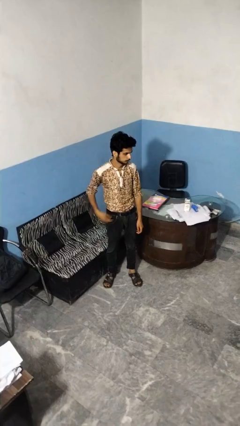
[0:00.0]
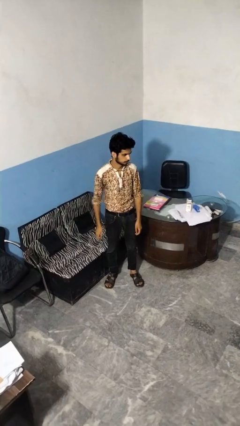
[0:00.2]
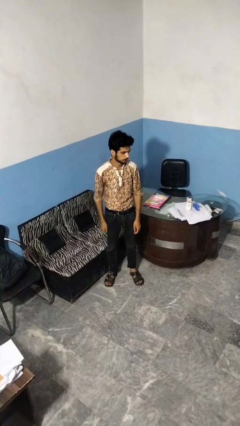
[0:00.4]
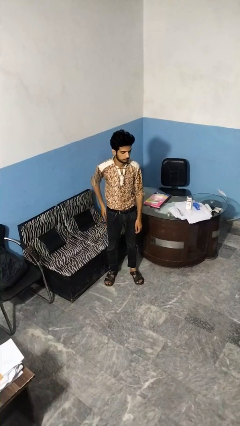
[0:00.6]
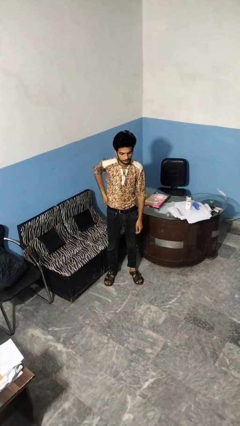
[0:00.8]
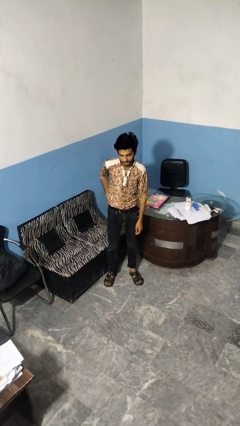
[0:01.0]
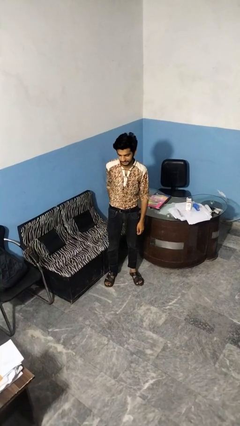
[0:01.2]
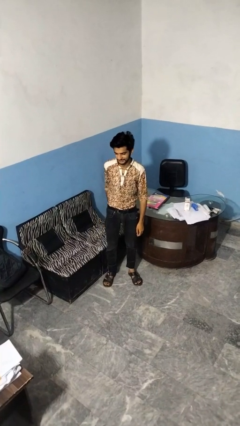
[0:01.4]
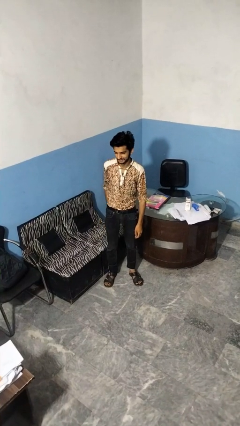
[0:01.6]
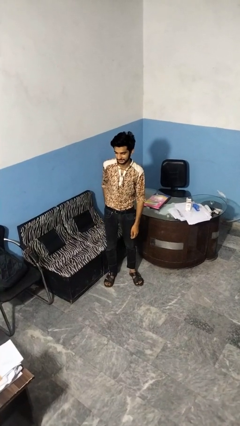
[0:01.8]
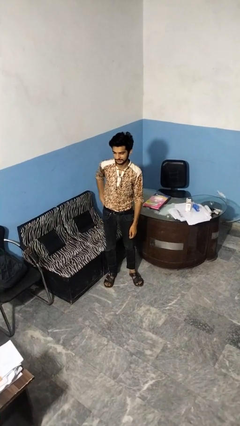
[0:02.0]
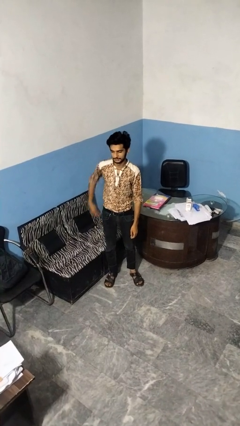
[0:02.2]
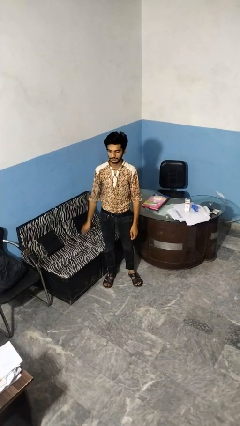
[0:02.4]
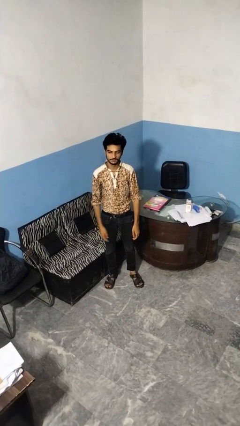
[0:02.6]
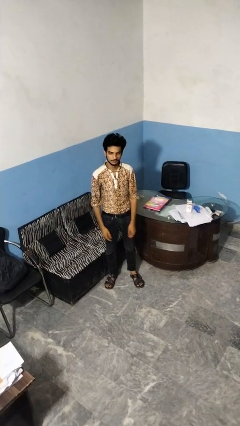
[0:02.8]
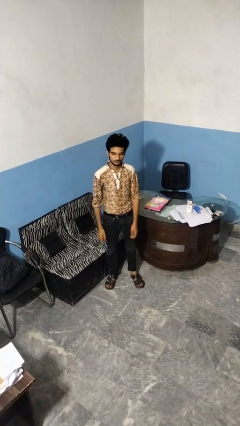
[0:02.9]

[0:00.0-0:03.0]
person puts hands in back pockets

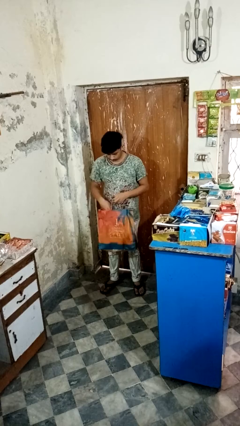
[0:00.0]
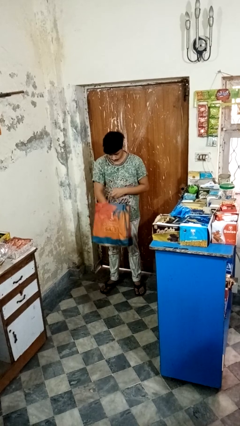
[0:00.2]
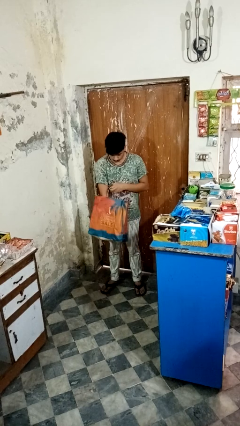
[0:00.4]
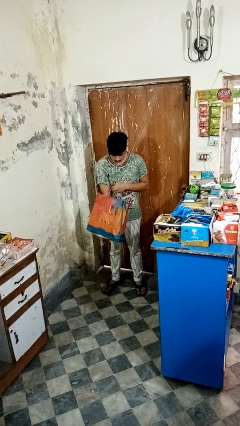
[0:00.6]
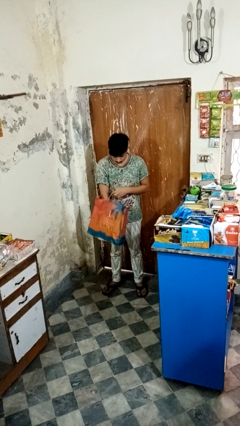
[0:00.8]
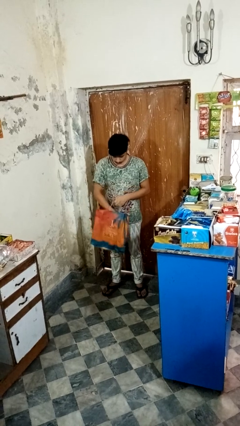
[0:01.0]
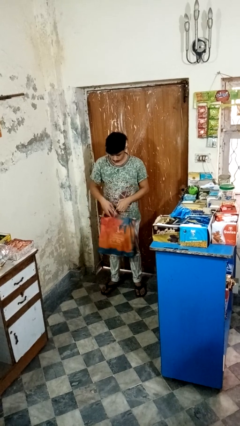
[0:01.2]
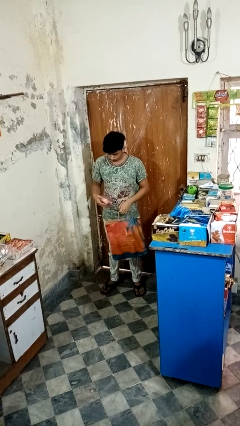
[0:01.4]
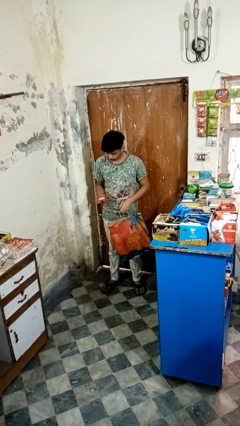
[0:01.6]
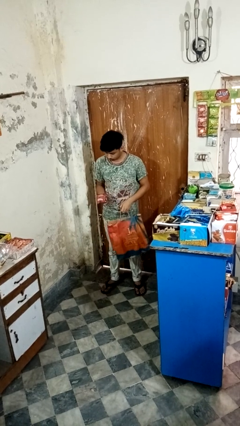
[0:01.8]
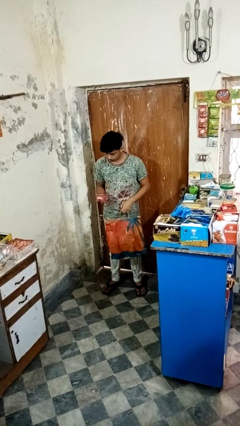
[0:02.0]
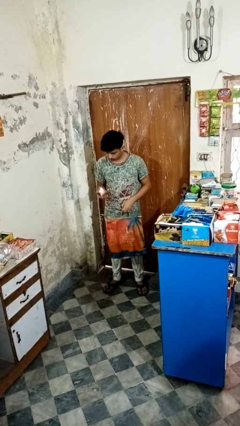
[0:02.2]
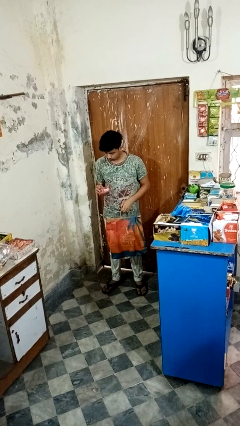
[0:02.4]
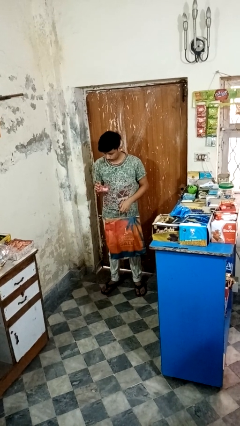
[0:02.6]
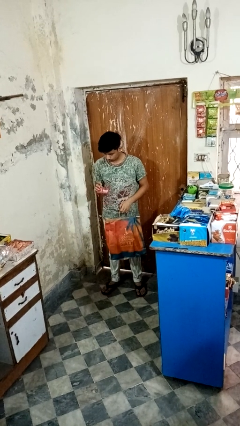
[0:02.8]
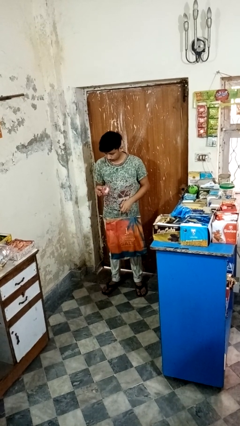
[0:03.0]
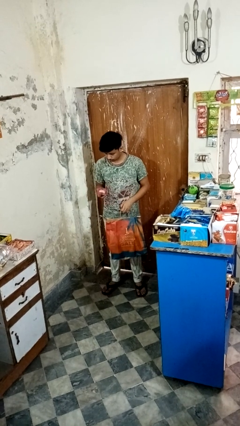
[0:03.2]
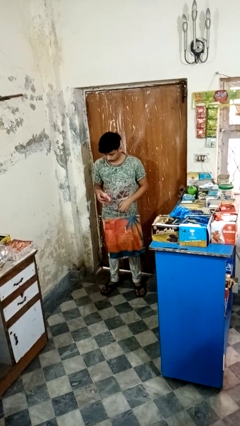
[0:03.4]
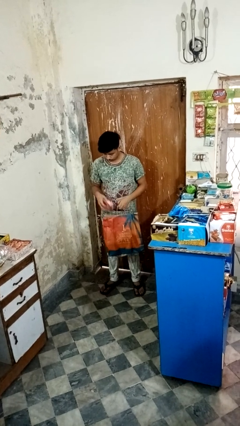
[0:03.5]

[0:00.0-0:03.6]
person takes object from bag

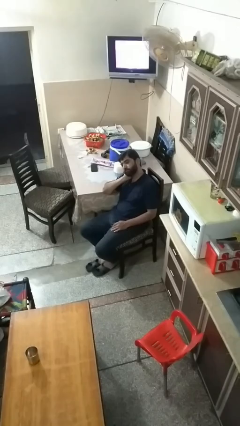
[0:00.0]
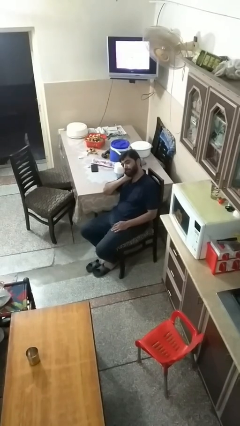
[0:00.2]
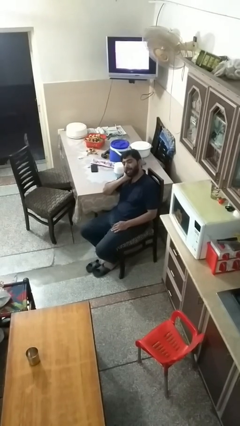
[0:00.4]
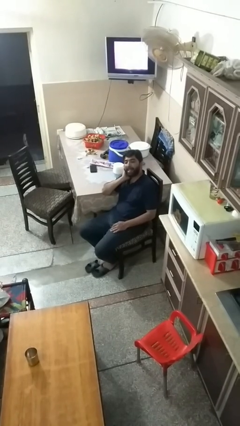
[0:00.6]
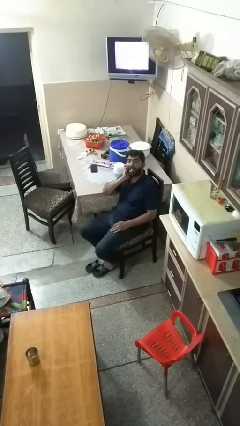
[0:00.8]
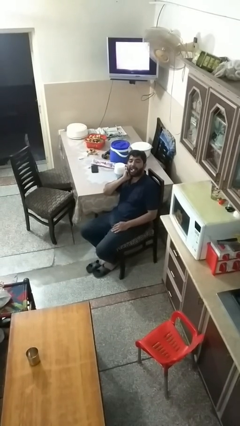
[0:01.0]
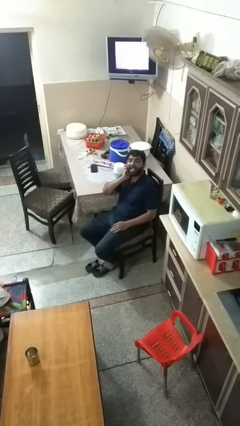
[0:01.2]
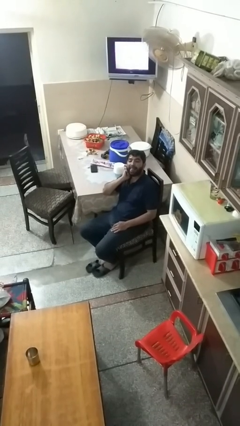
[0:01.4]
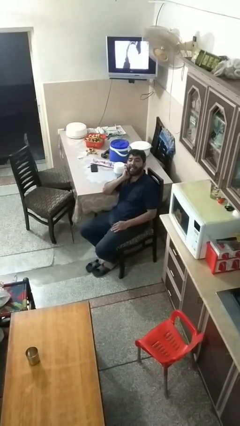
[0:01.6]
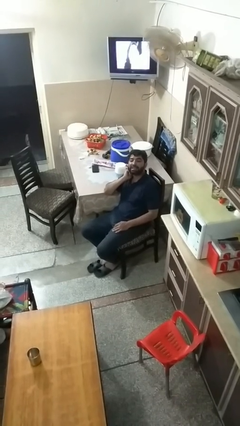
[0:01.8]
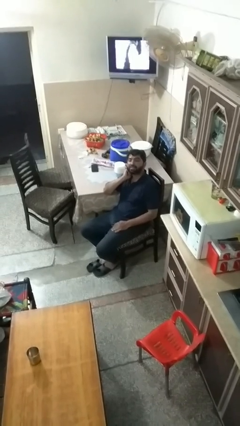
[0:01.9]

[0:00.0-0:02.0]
person sticks out tongue

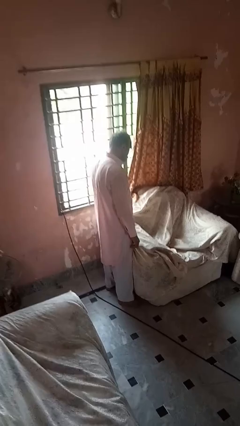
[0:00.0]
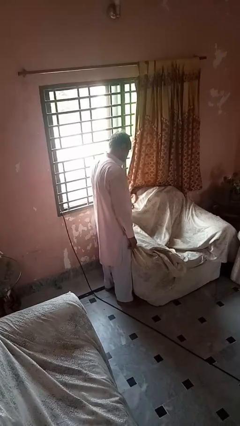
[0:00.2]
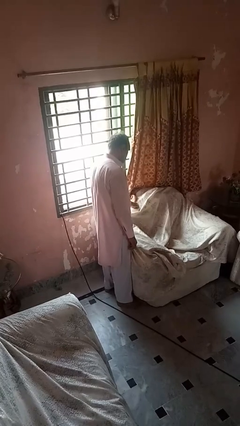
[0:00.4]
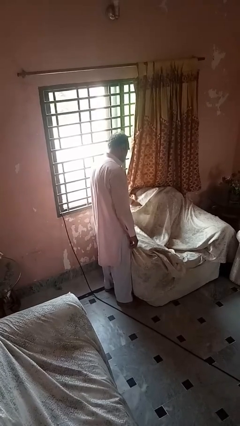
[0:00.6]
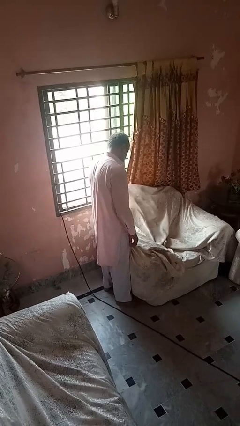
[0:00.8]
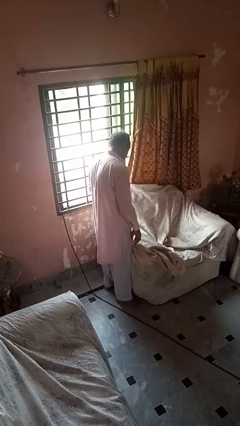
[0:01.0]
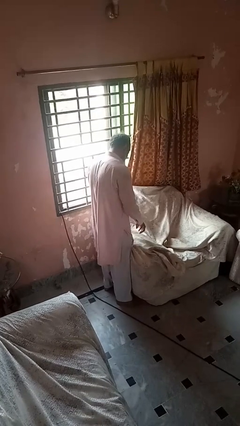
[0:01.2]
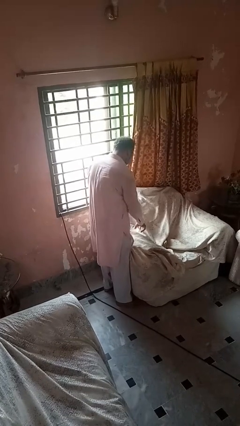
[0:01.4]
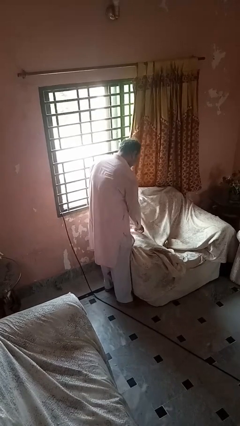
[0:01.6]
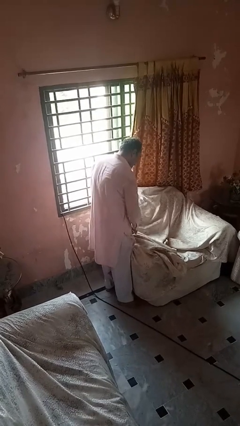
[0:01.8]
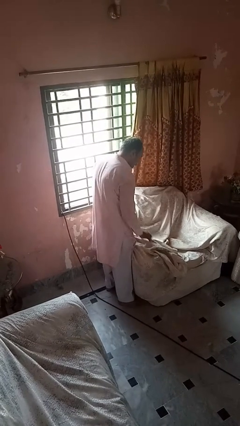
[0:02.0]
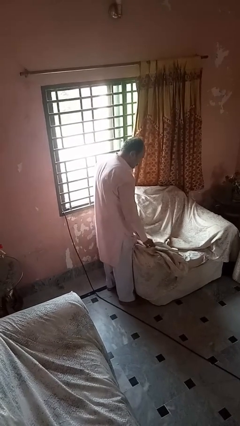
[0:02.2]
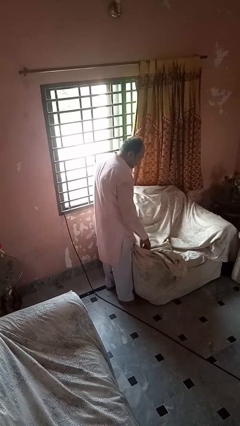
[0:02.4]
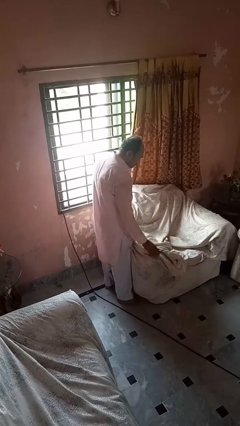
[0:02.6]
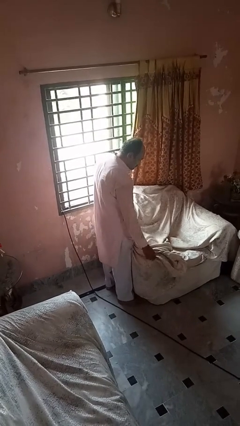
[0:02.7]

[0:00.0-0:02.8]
person searches in couch

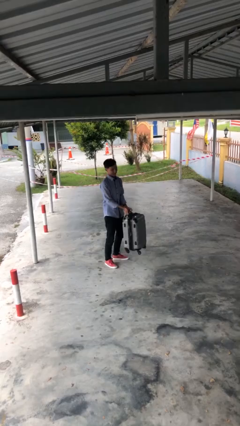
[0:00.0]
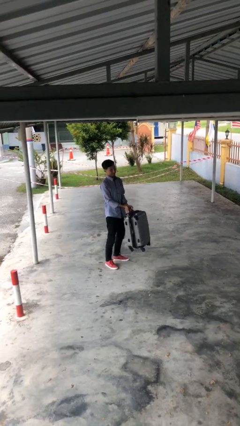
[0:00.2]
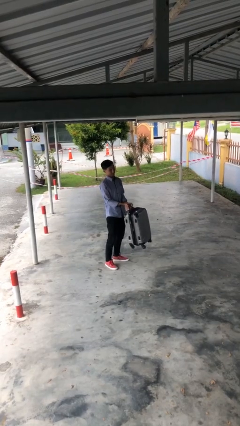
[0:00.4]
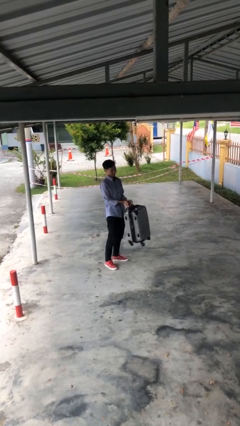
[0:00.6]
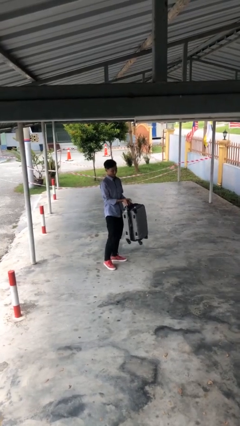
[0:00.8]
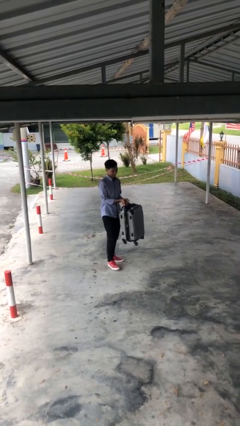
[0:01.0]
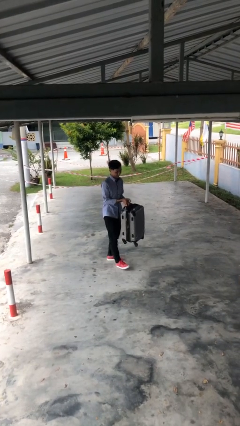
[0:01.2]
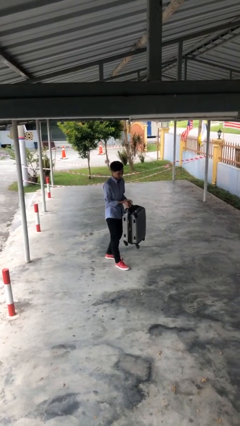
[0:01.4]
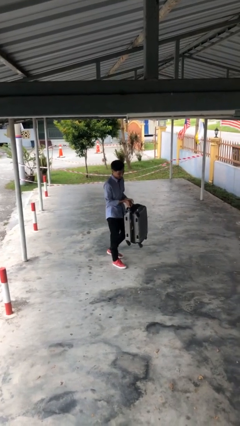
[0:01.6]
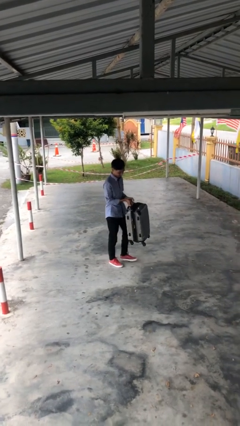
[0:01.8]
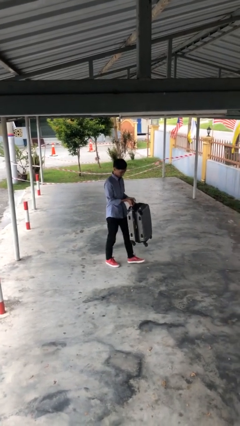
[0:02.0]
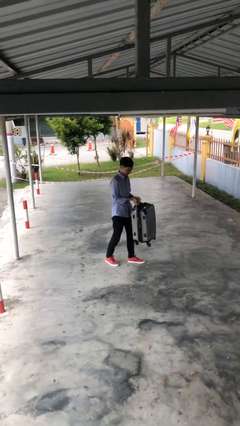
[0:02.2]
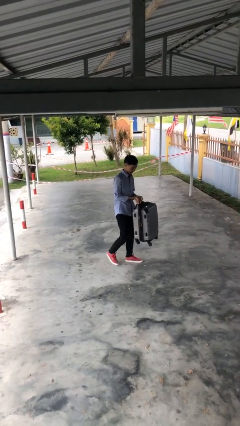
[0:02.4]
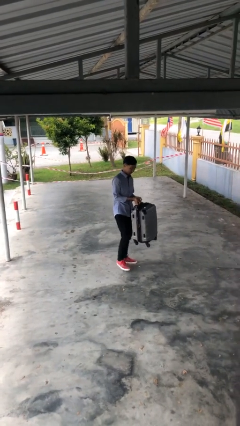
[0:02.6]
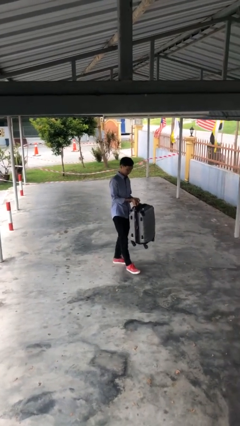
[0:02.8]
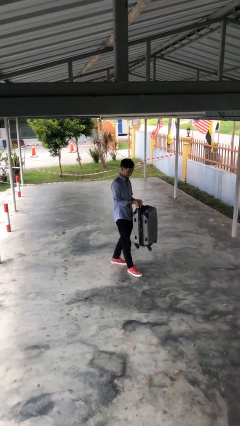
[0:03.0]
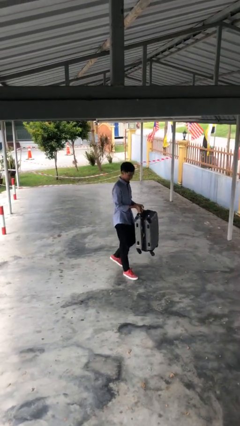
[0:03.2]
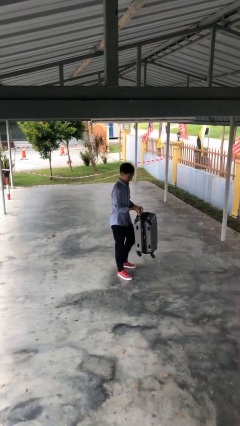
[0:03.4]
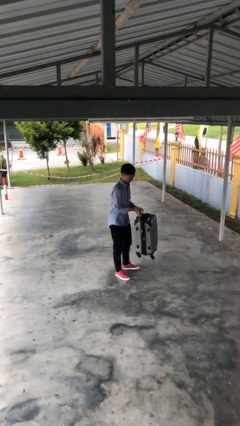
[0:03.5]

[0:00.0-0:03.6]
person carries heavy object

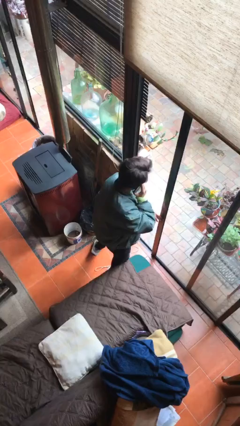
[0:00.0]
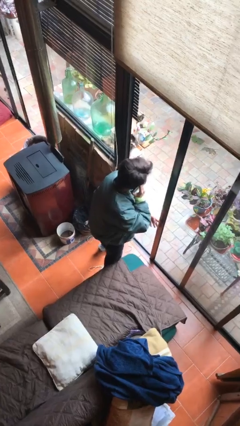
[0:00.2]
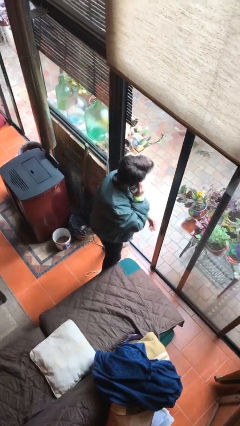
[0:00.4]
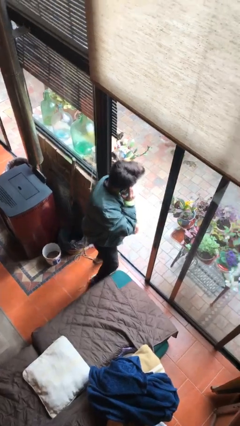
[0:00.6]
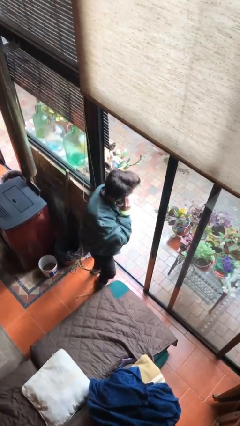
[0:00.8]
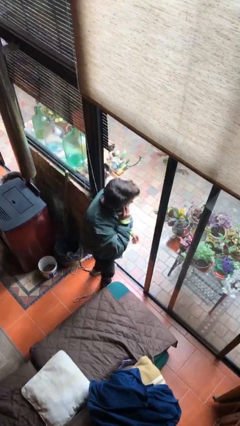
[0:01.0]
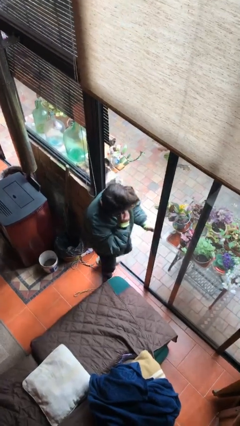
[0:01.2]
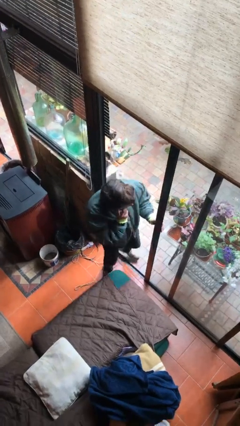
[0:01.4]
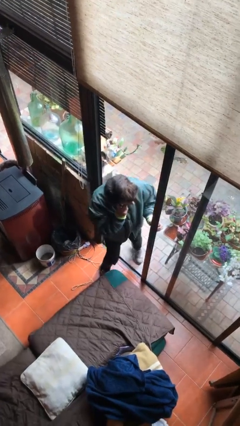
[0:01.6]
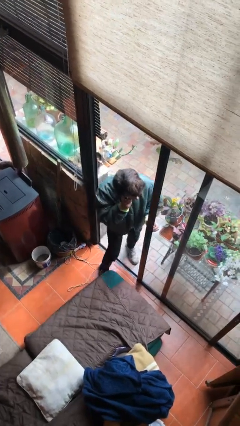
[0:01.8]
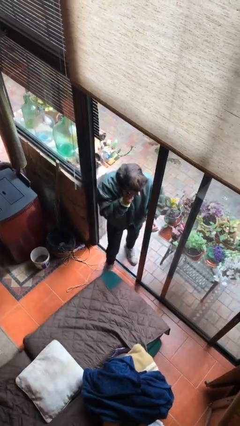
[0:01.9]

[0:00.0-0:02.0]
person exits scene through structure

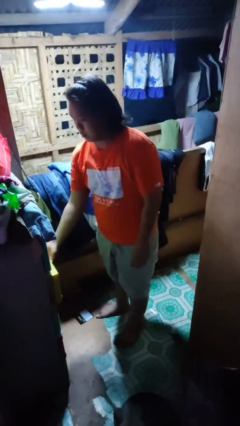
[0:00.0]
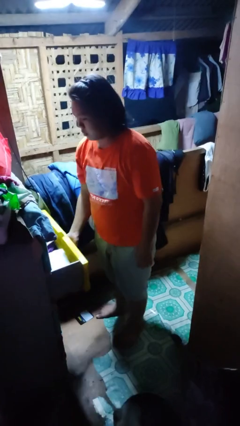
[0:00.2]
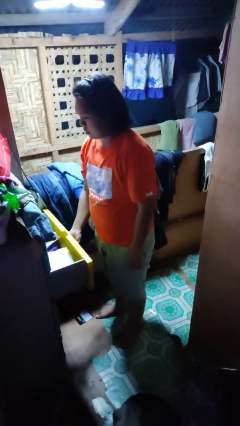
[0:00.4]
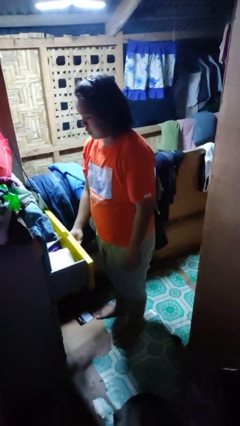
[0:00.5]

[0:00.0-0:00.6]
person opens dresser drawer
